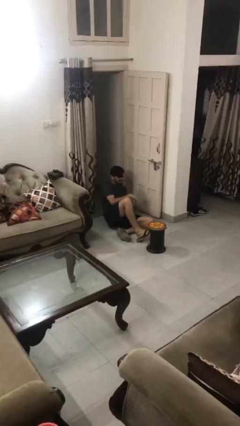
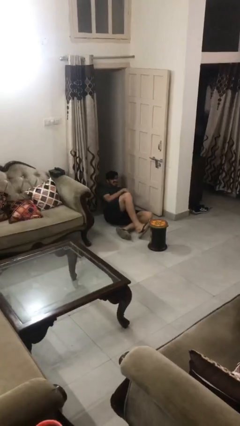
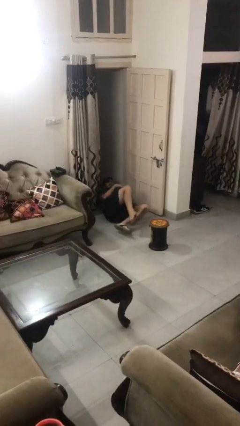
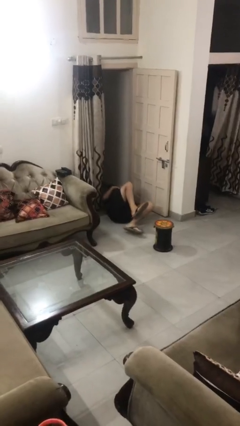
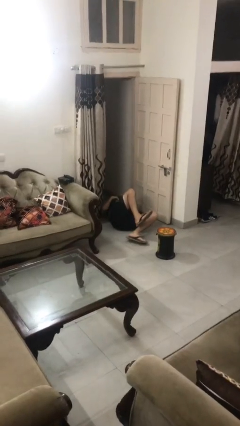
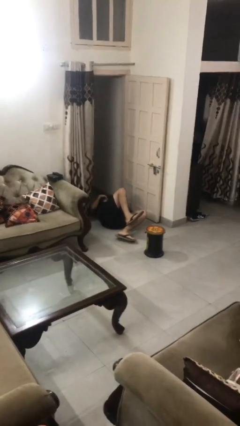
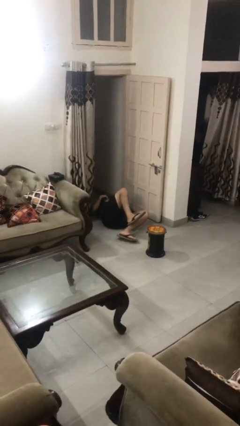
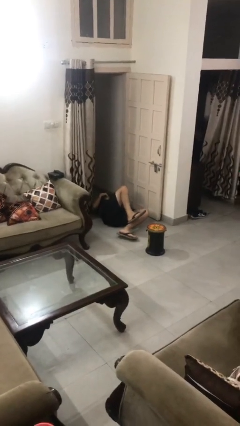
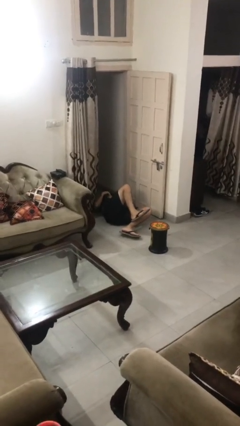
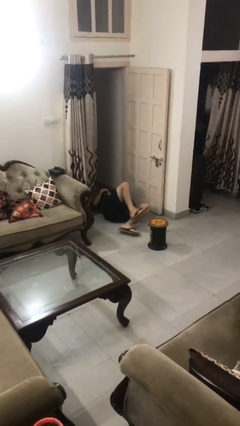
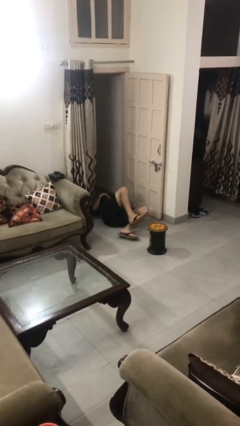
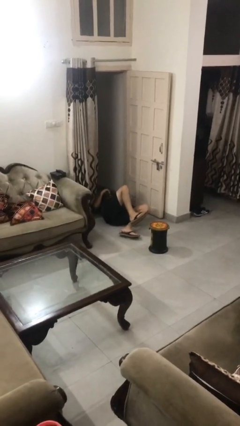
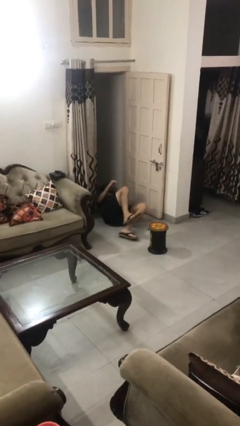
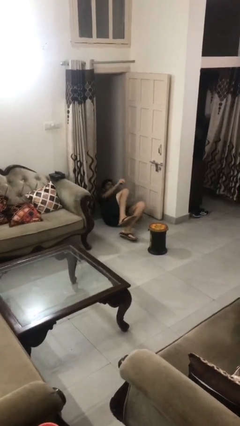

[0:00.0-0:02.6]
person lies down on floor

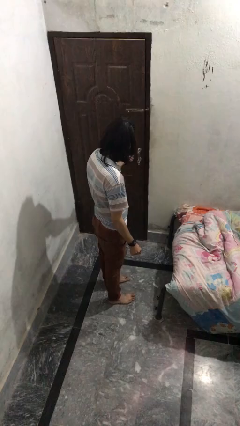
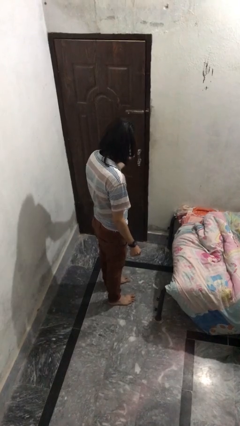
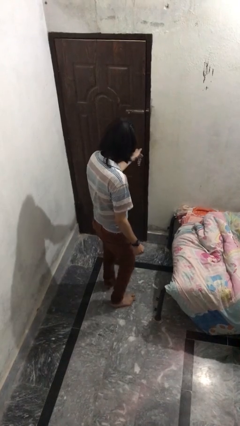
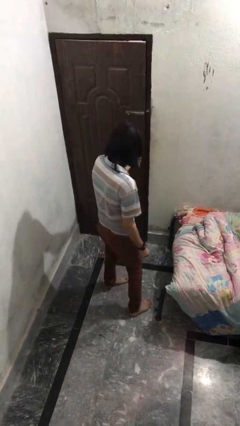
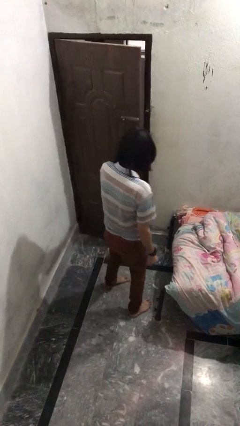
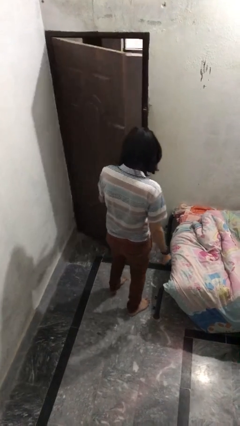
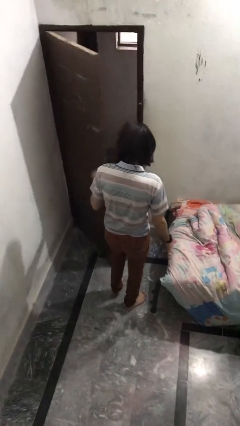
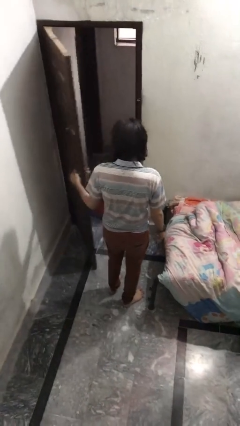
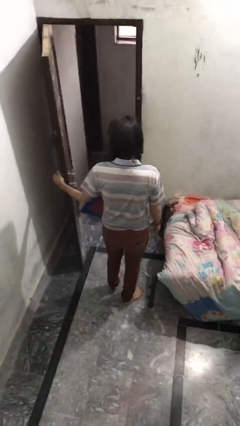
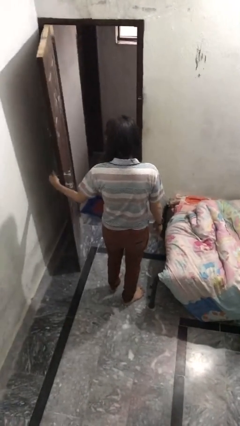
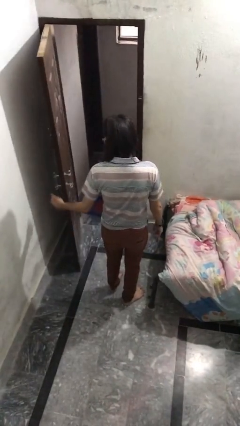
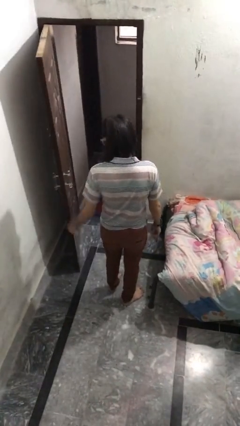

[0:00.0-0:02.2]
person opens facility door

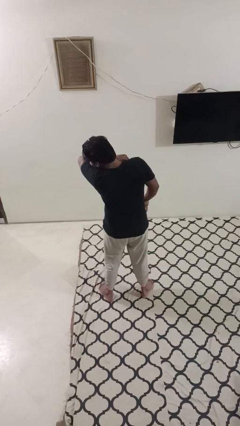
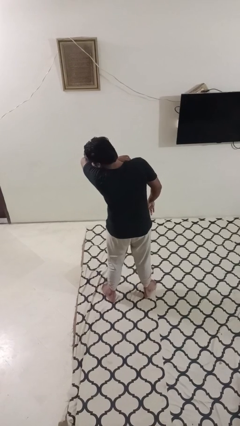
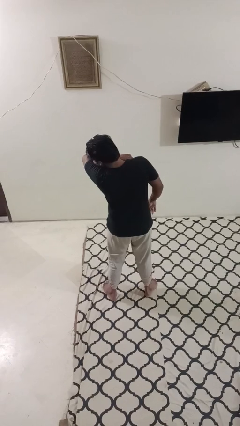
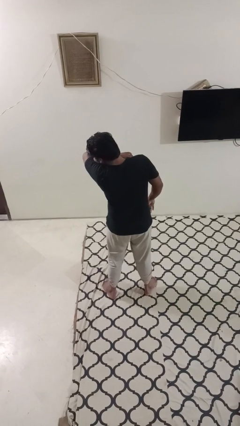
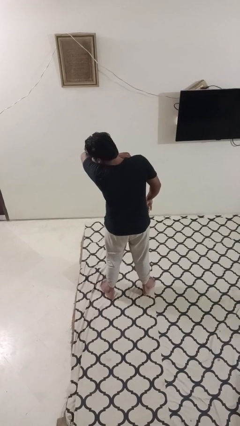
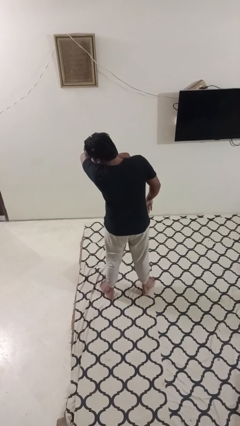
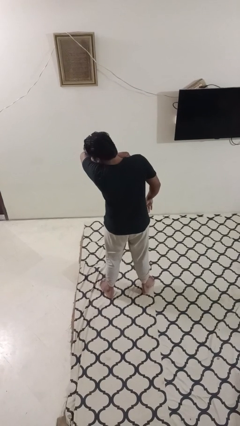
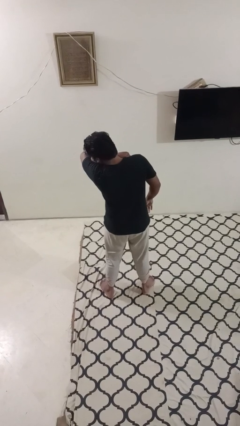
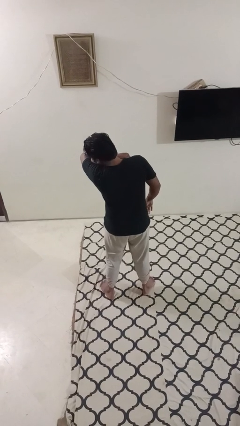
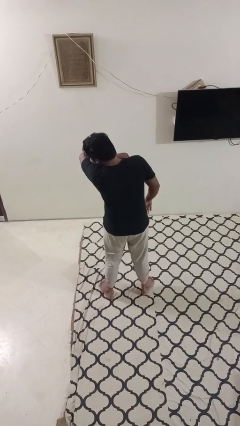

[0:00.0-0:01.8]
person sneezes into arm

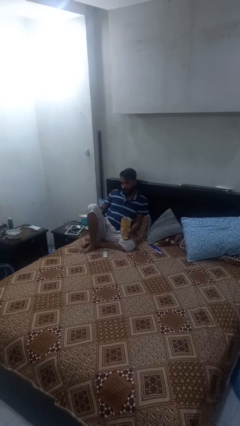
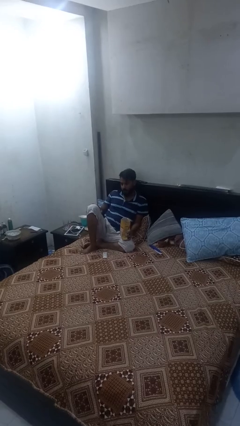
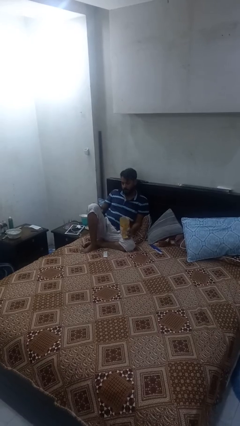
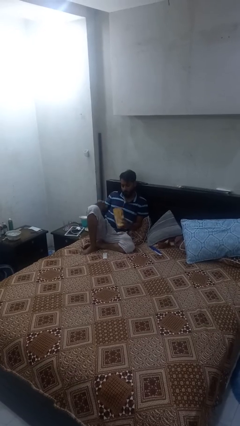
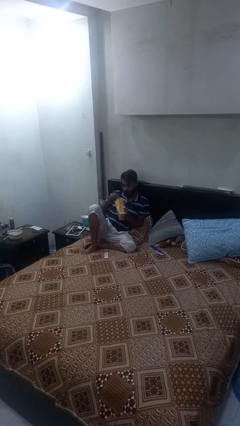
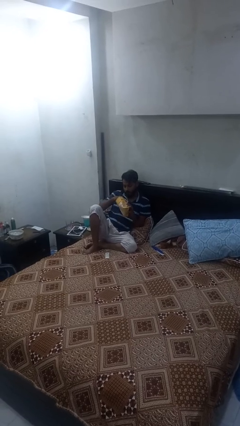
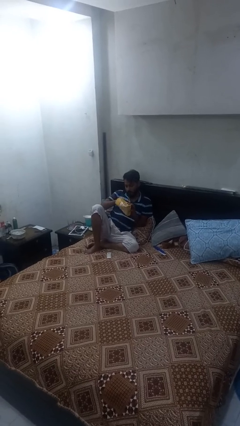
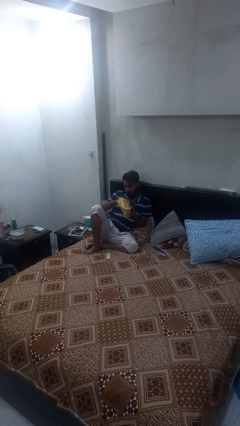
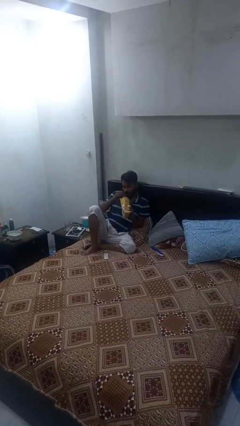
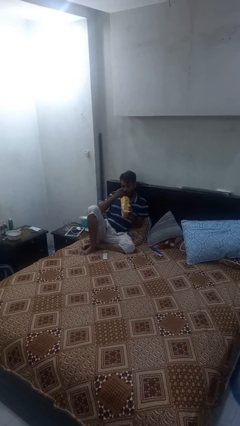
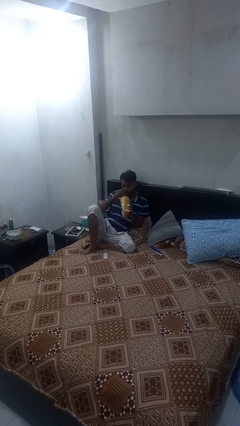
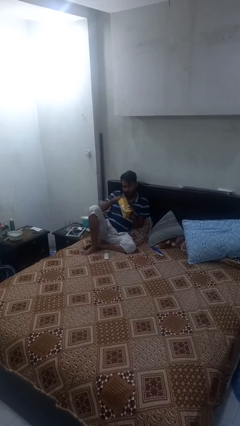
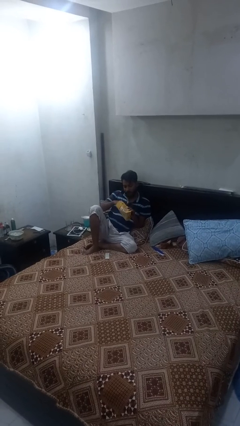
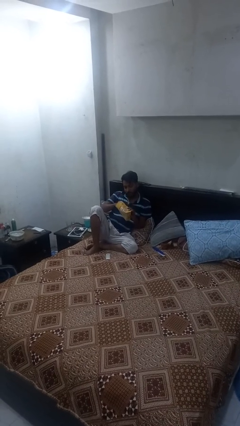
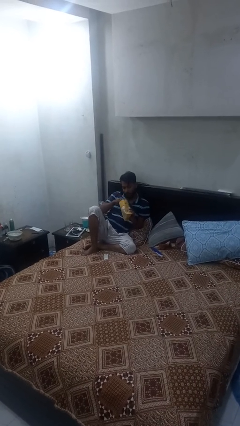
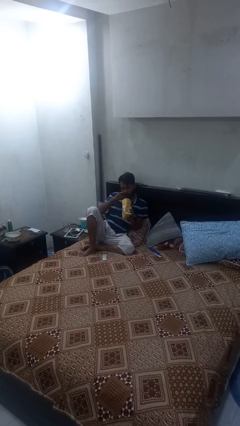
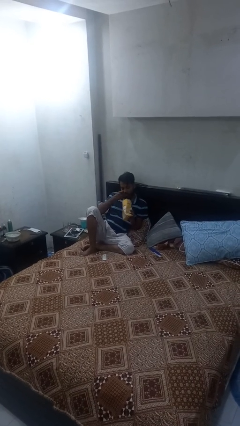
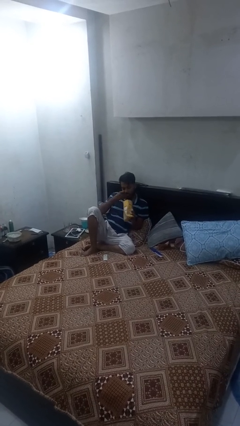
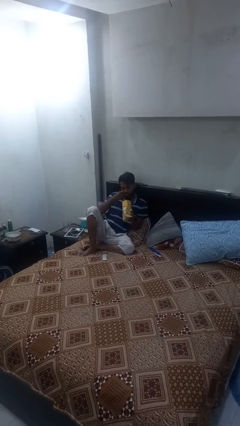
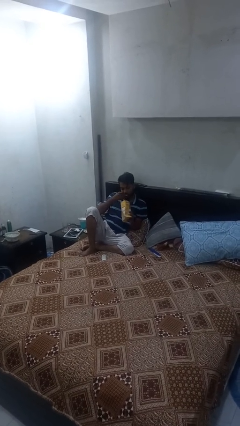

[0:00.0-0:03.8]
person eats snack from bag

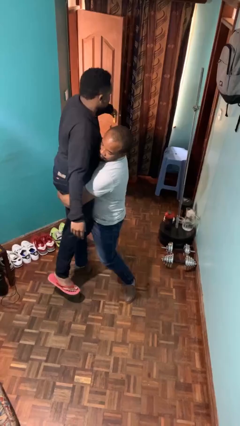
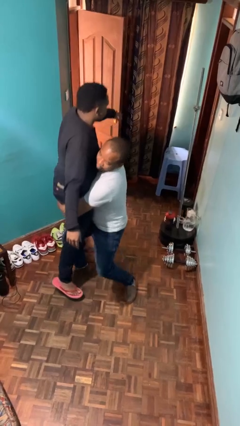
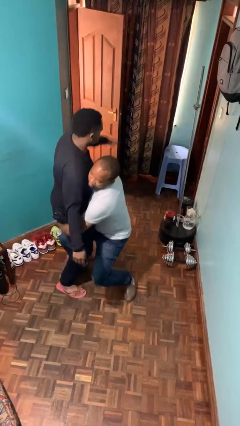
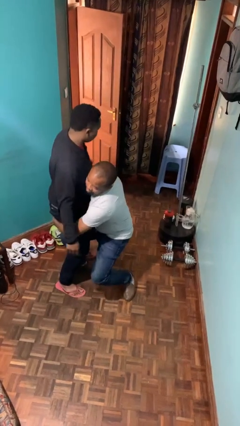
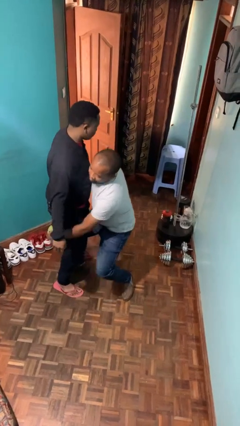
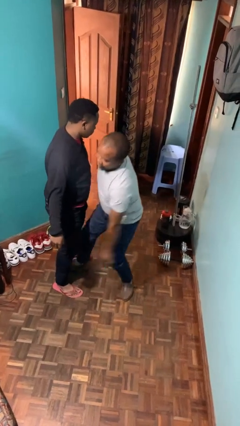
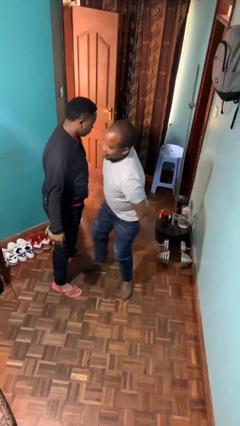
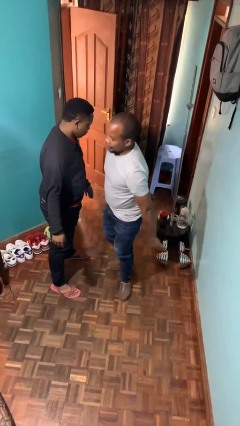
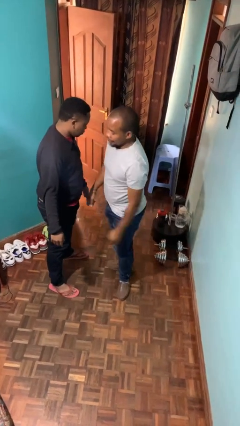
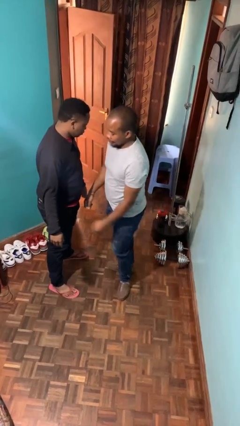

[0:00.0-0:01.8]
person puts down person

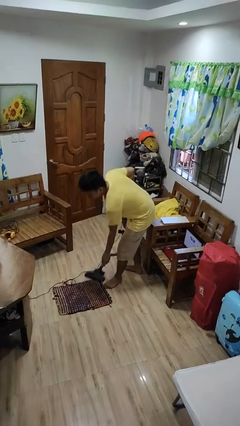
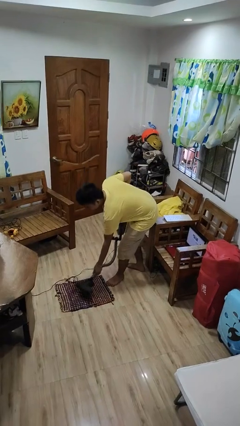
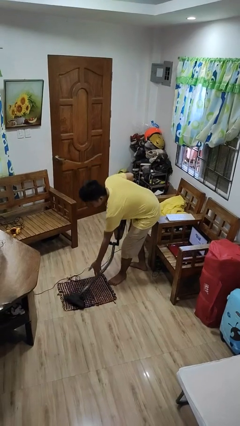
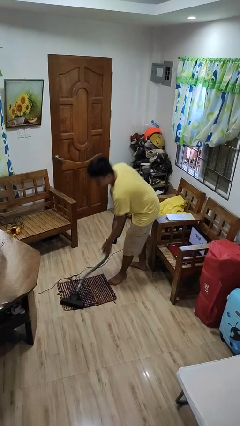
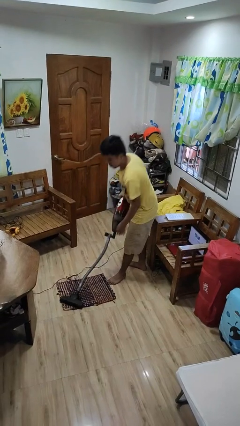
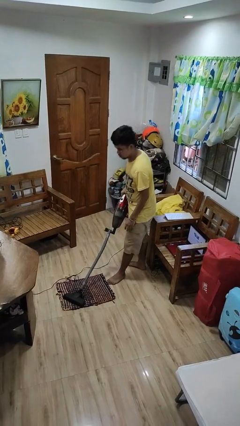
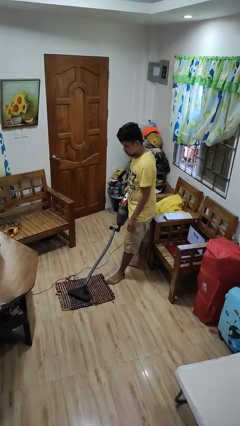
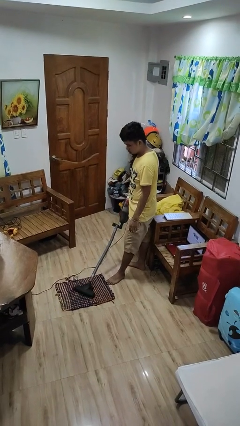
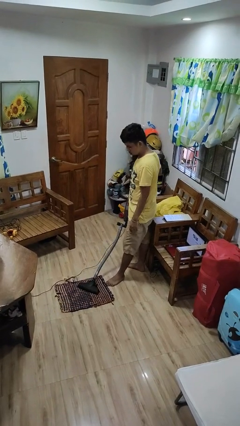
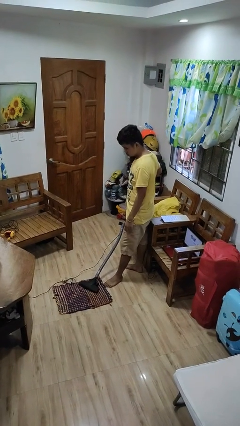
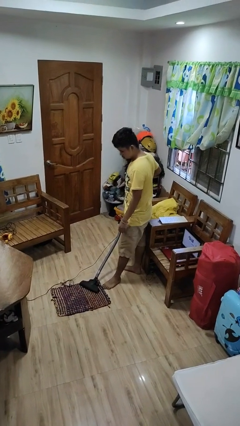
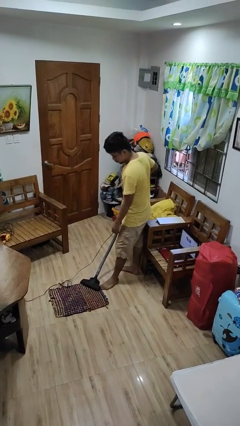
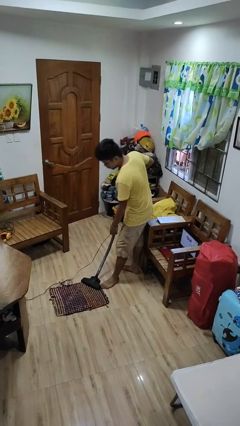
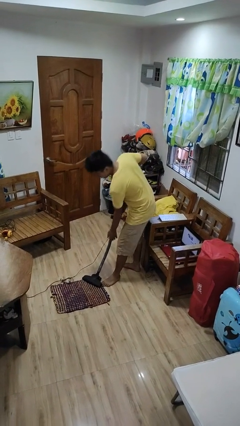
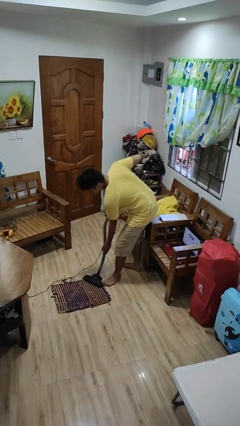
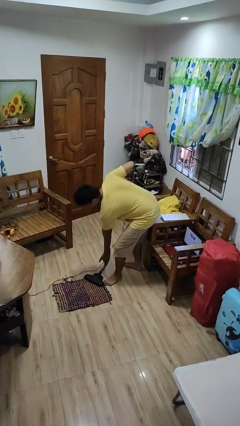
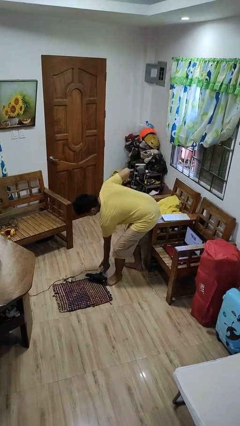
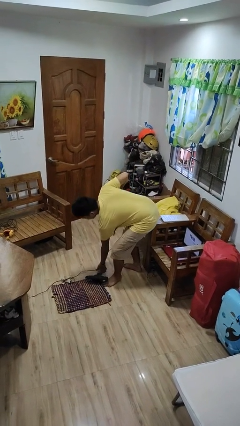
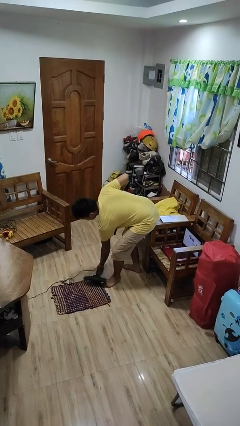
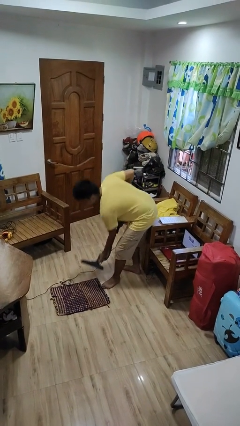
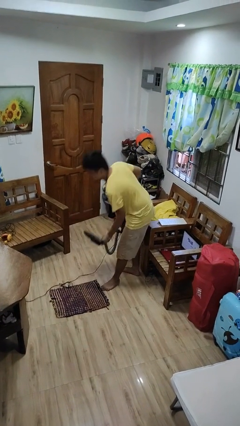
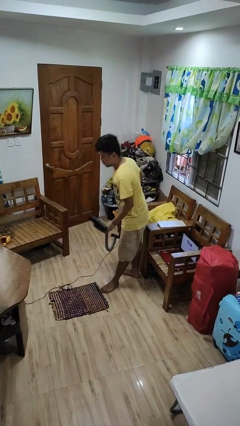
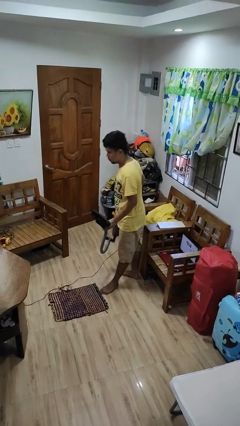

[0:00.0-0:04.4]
person vacuums carpet

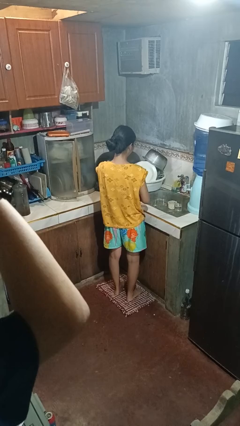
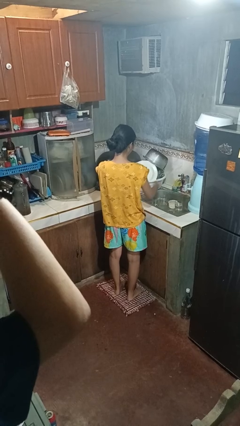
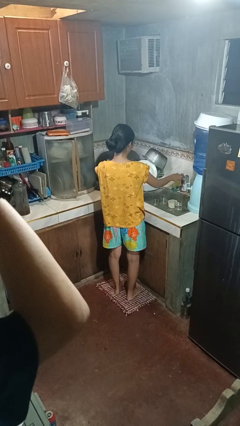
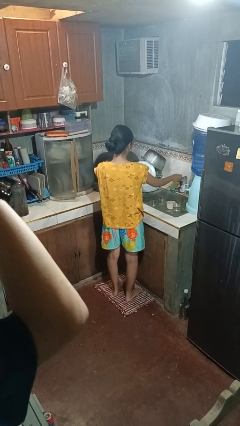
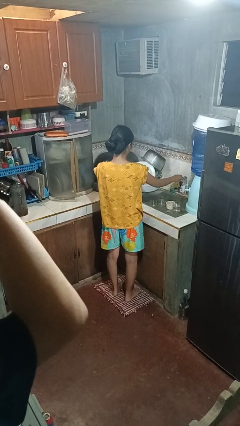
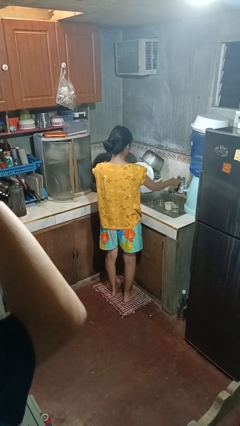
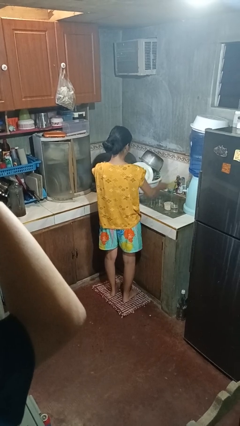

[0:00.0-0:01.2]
person turns on faucet
